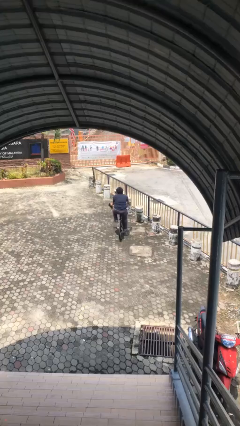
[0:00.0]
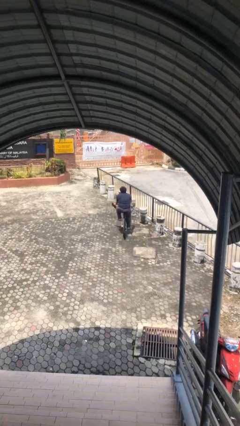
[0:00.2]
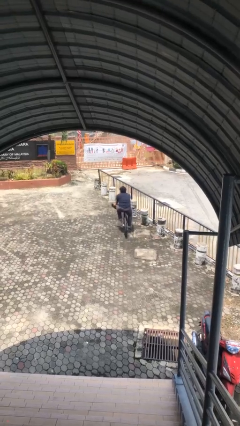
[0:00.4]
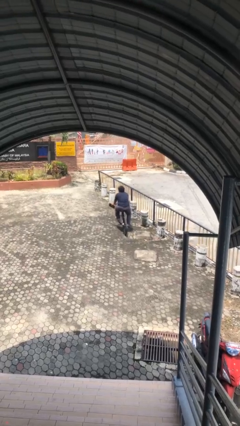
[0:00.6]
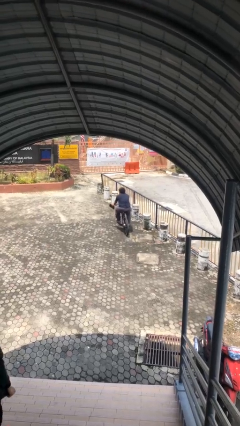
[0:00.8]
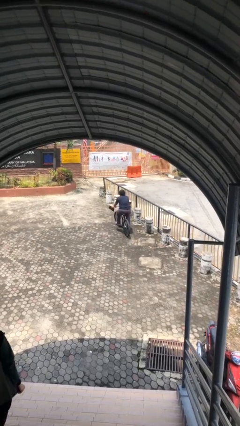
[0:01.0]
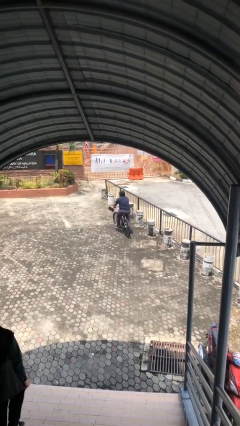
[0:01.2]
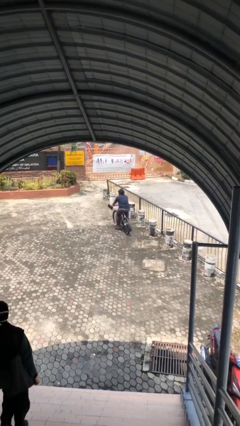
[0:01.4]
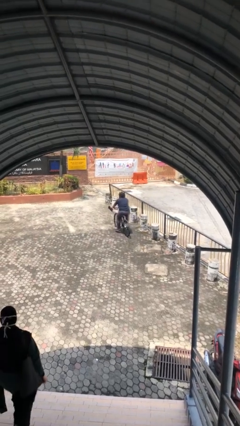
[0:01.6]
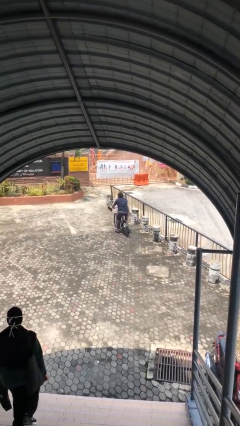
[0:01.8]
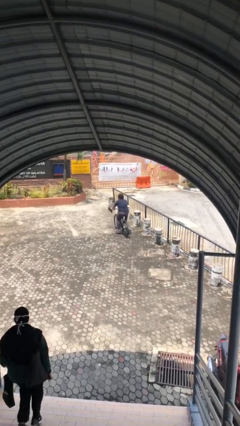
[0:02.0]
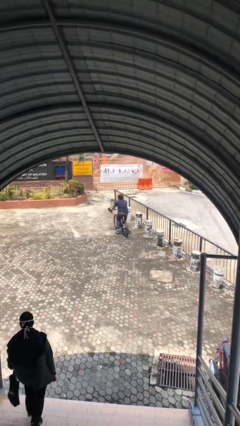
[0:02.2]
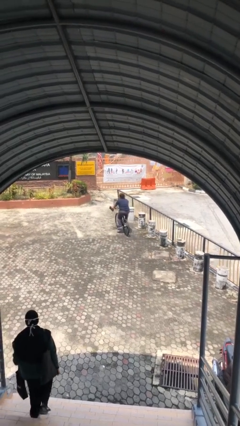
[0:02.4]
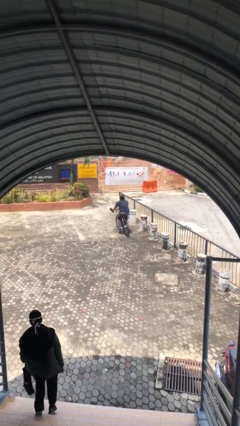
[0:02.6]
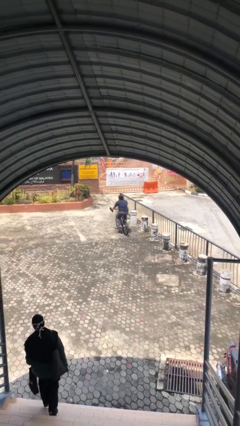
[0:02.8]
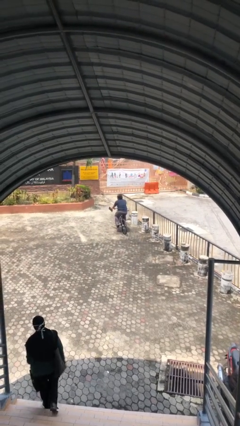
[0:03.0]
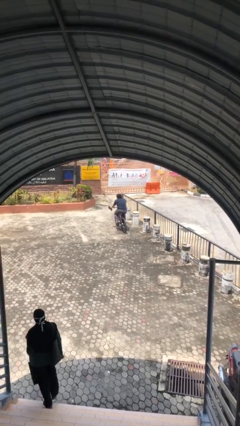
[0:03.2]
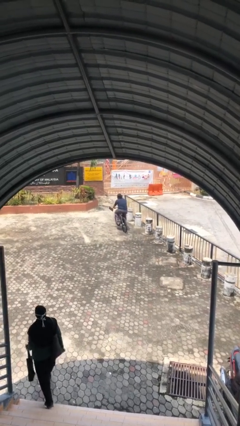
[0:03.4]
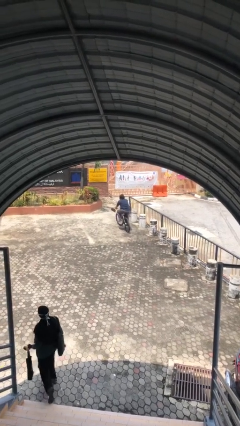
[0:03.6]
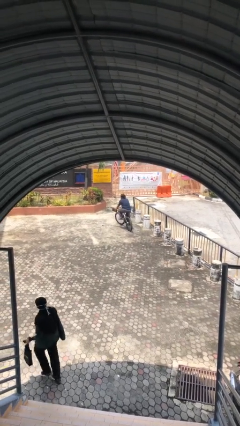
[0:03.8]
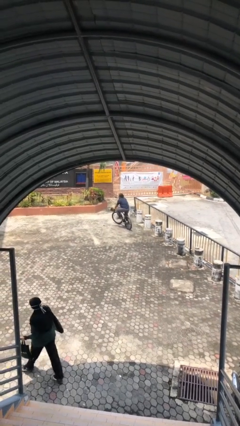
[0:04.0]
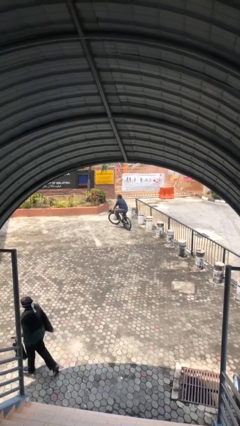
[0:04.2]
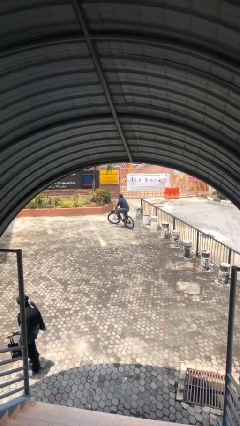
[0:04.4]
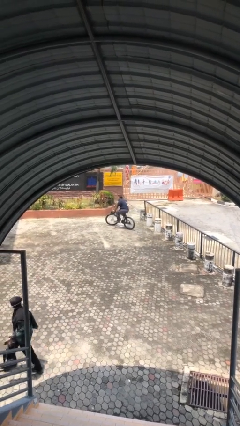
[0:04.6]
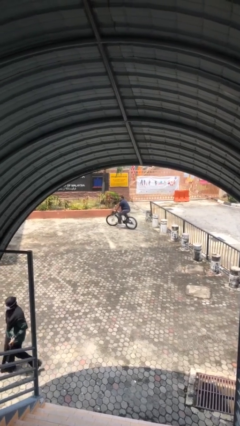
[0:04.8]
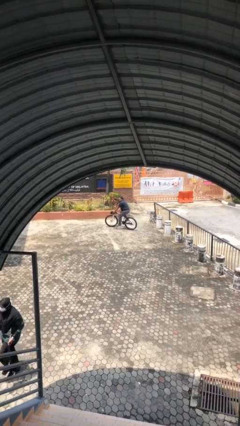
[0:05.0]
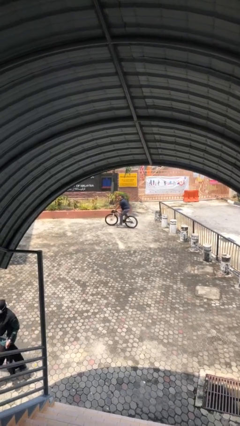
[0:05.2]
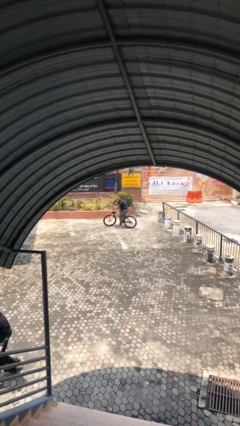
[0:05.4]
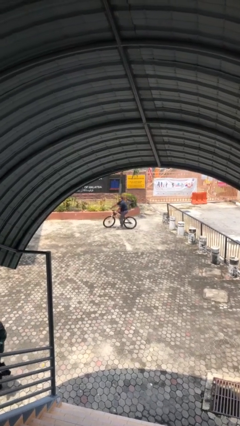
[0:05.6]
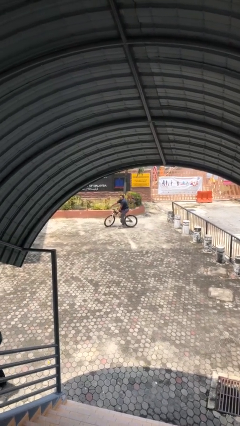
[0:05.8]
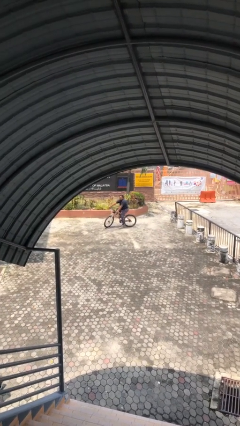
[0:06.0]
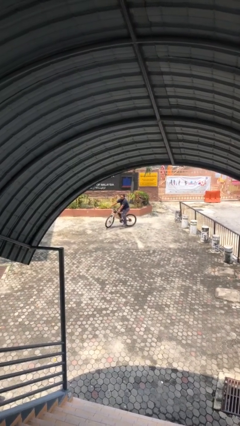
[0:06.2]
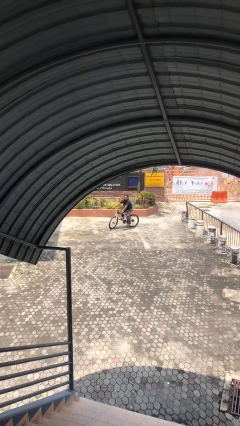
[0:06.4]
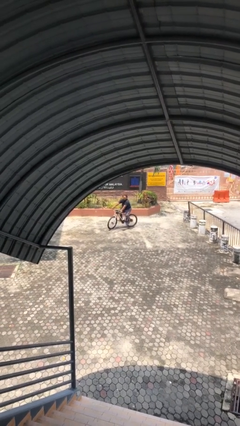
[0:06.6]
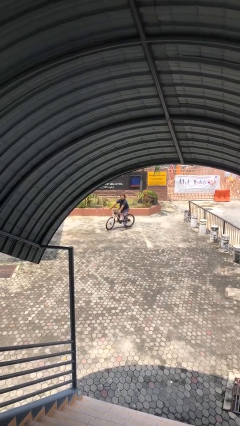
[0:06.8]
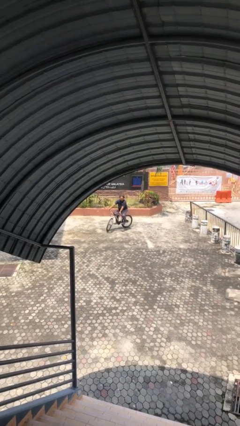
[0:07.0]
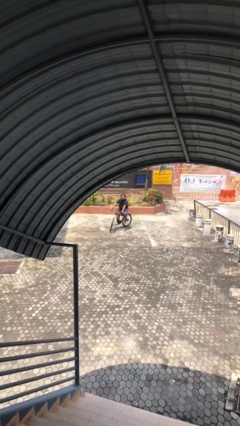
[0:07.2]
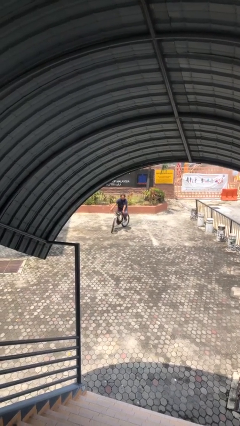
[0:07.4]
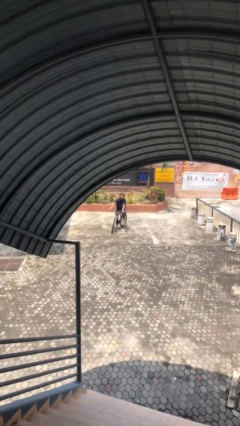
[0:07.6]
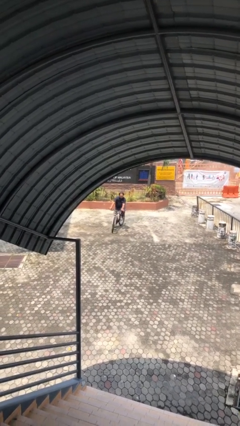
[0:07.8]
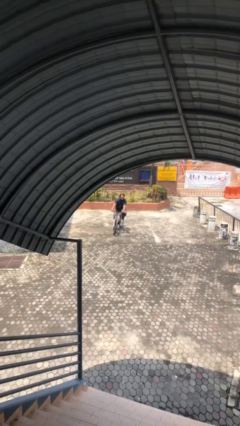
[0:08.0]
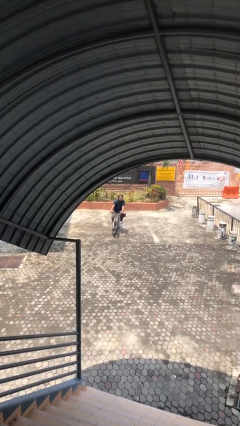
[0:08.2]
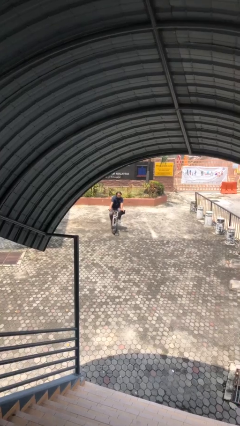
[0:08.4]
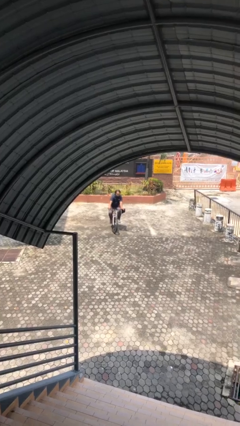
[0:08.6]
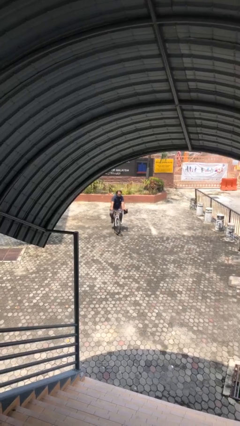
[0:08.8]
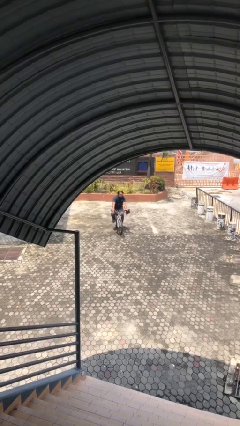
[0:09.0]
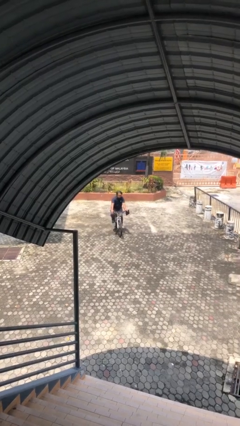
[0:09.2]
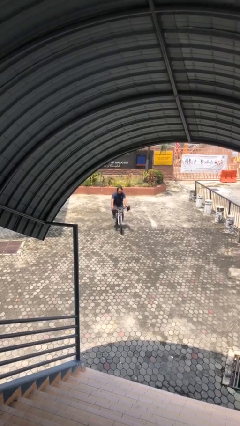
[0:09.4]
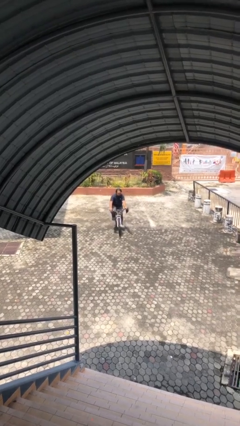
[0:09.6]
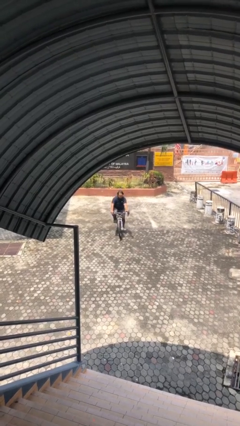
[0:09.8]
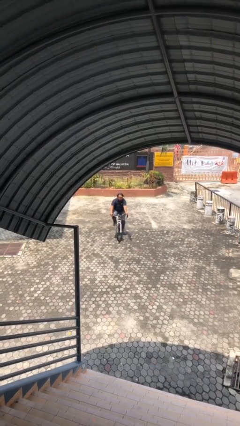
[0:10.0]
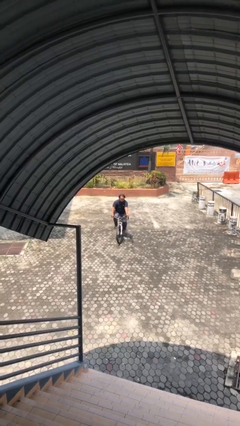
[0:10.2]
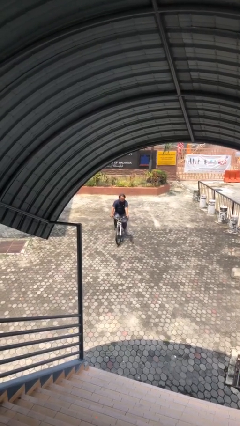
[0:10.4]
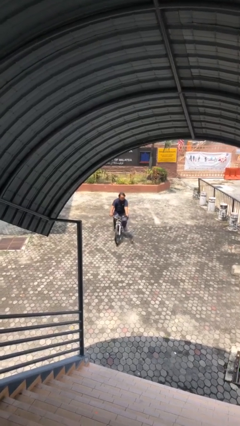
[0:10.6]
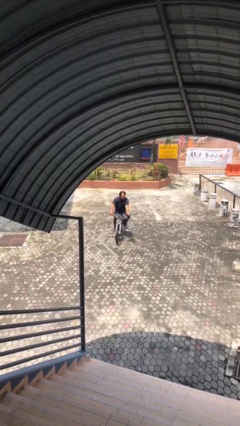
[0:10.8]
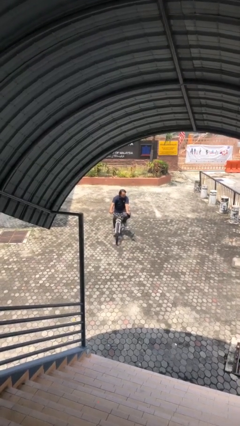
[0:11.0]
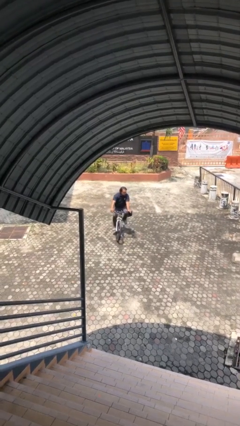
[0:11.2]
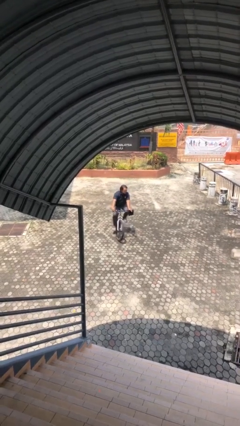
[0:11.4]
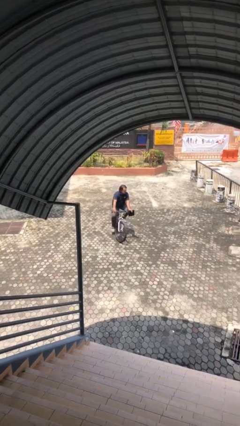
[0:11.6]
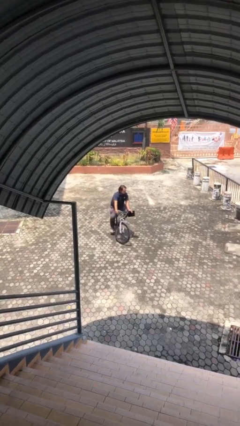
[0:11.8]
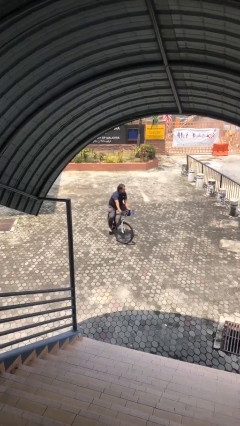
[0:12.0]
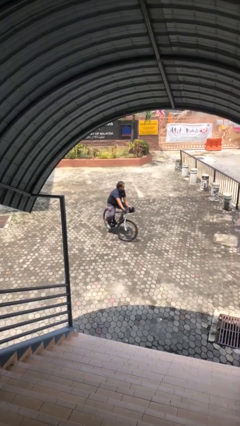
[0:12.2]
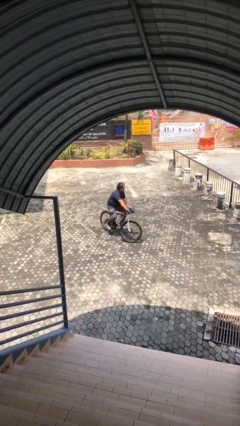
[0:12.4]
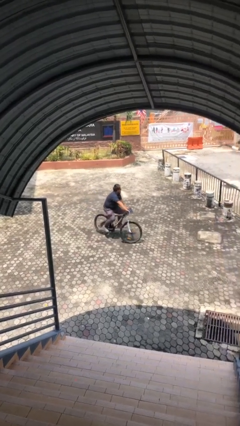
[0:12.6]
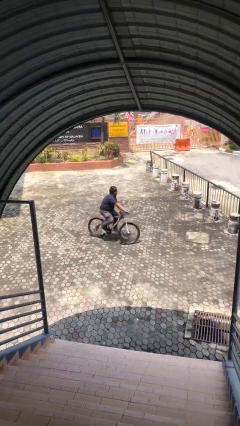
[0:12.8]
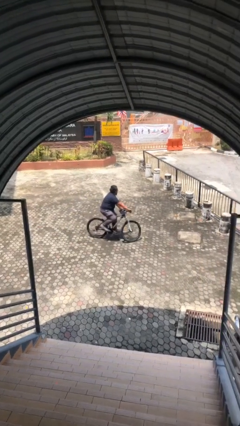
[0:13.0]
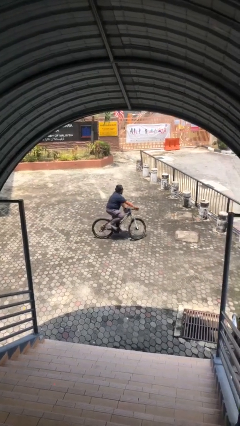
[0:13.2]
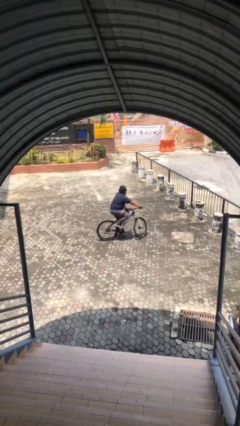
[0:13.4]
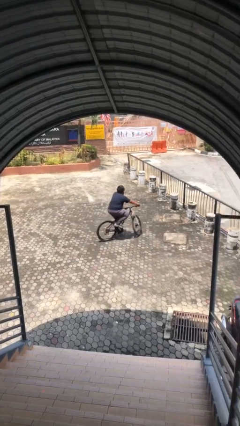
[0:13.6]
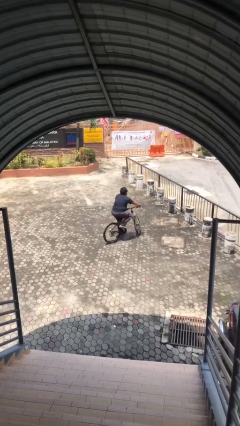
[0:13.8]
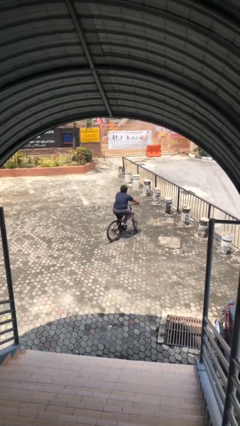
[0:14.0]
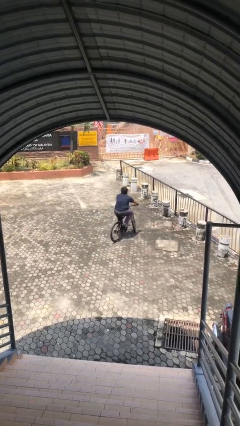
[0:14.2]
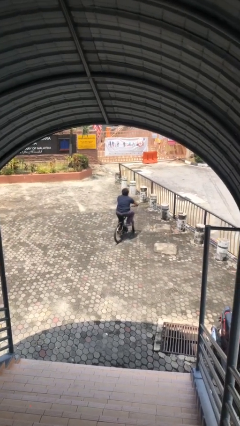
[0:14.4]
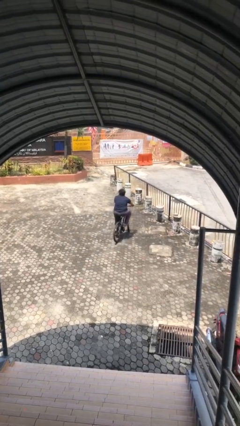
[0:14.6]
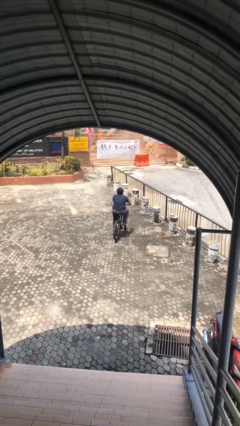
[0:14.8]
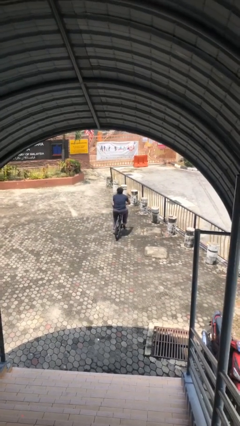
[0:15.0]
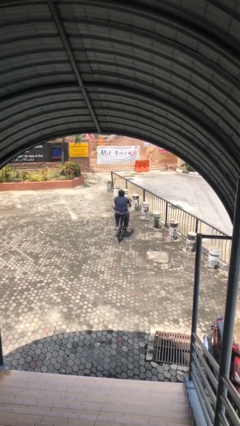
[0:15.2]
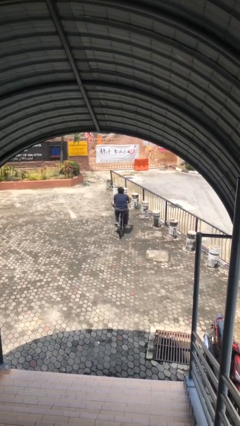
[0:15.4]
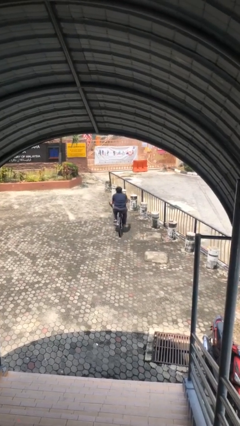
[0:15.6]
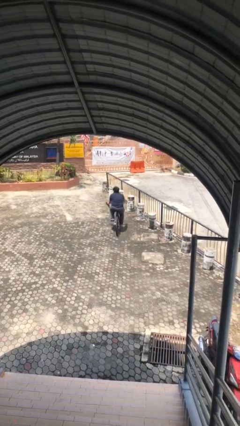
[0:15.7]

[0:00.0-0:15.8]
person rides bicycle

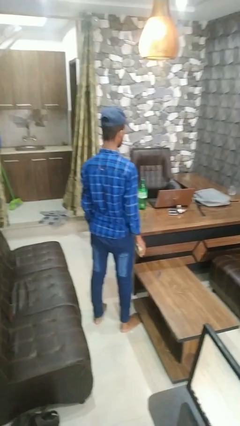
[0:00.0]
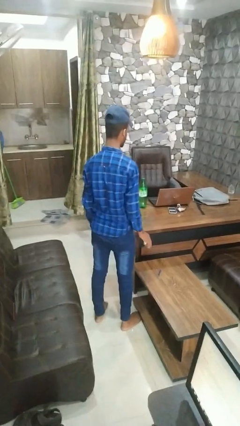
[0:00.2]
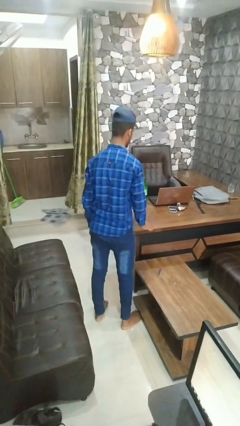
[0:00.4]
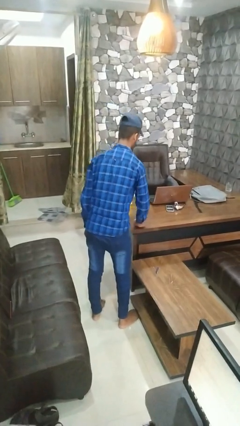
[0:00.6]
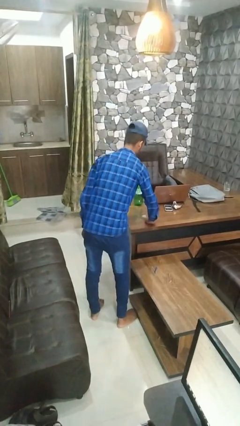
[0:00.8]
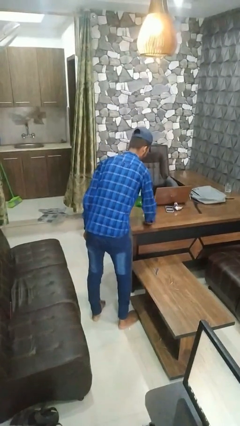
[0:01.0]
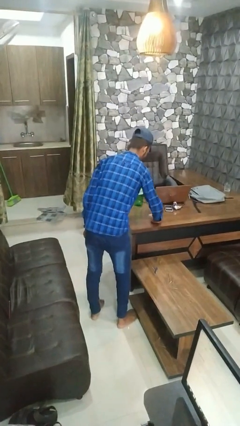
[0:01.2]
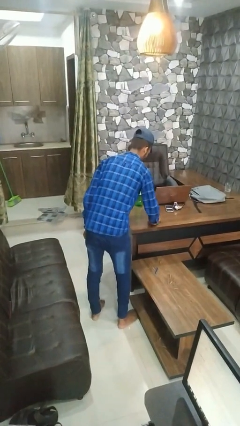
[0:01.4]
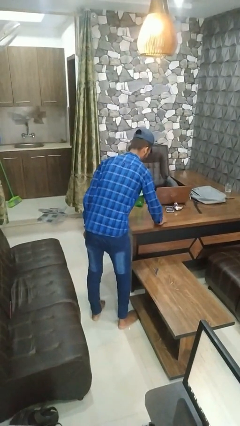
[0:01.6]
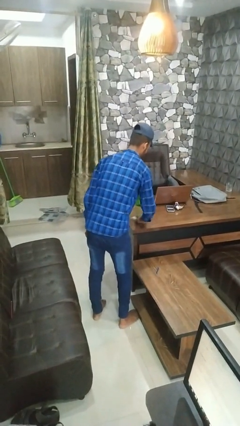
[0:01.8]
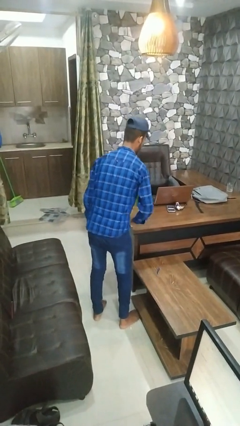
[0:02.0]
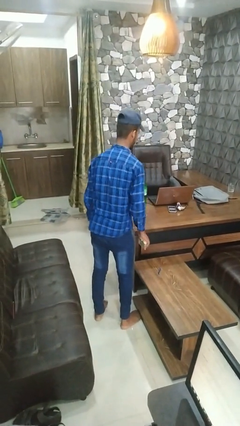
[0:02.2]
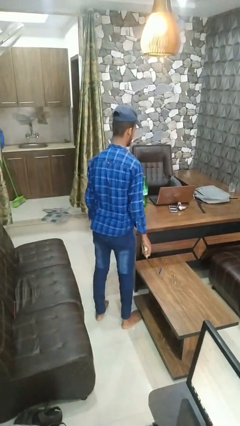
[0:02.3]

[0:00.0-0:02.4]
person dusts furniture
